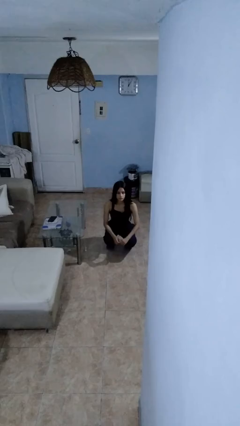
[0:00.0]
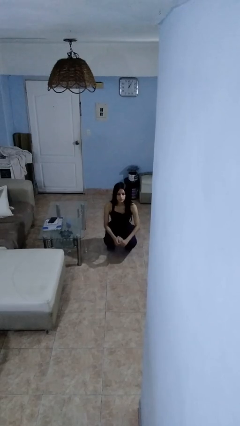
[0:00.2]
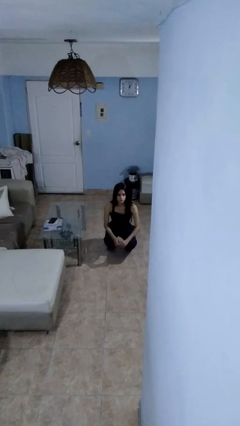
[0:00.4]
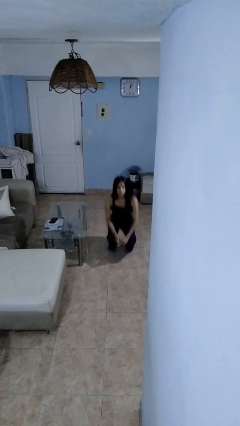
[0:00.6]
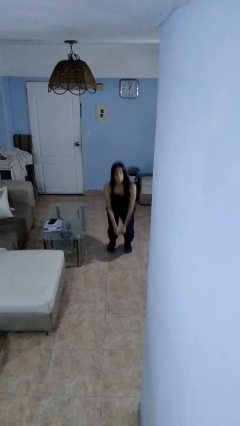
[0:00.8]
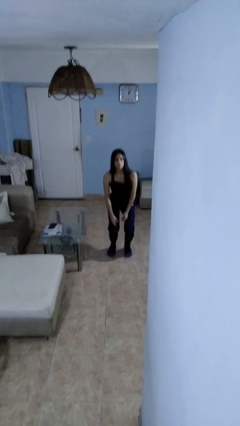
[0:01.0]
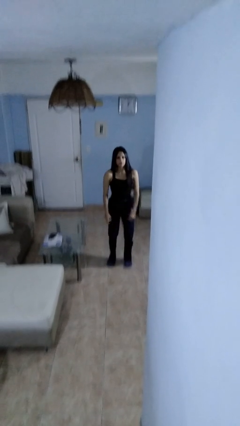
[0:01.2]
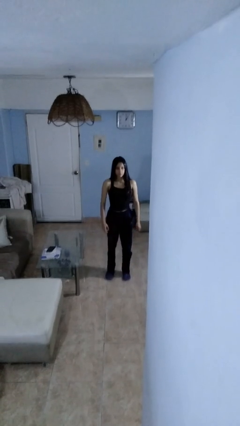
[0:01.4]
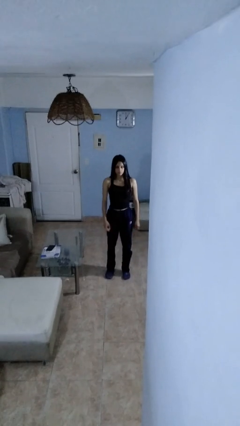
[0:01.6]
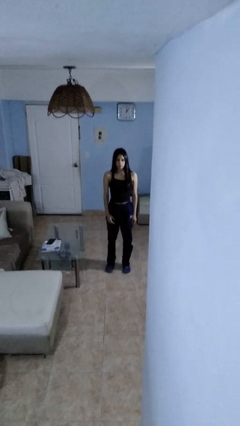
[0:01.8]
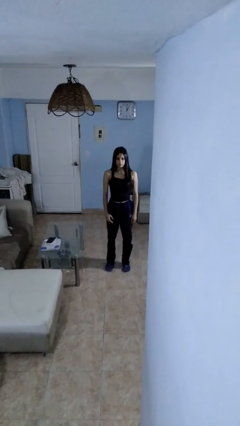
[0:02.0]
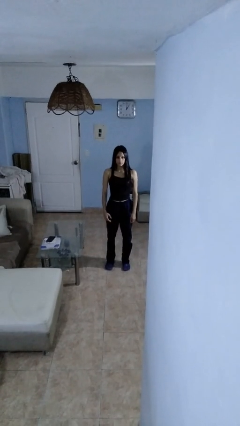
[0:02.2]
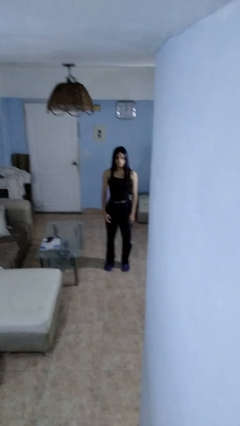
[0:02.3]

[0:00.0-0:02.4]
person stands up

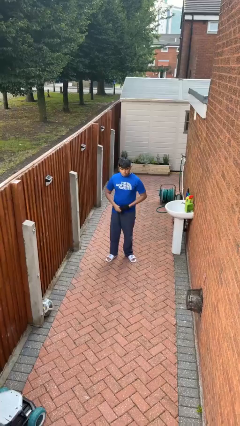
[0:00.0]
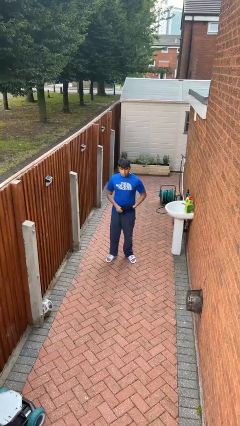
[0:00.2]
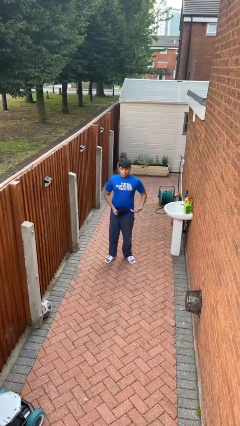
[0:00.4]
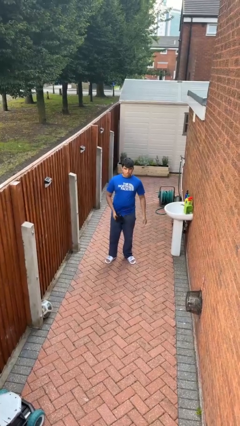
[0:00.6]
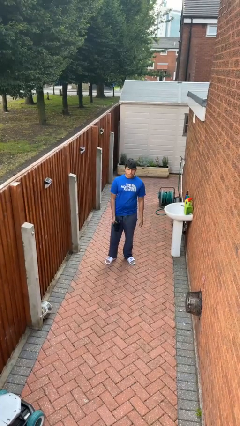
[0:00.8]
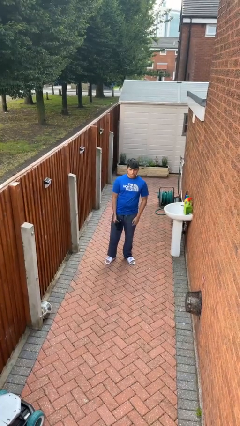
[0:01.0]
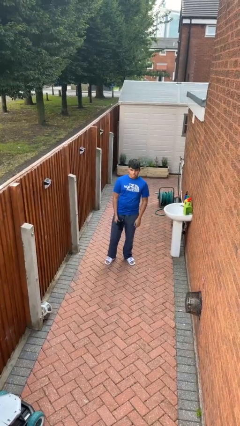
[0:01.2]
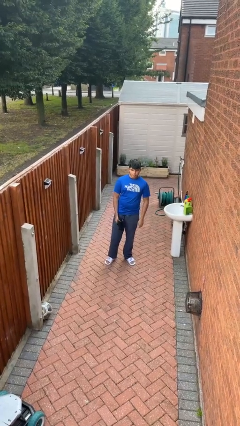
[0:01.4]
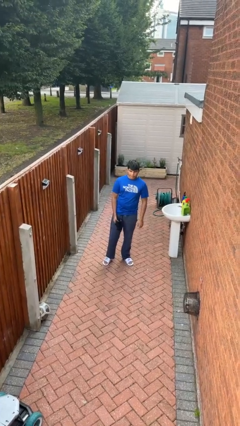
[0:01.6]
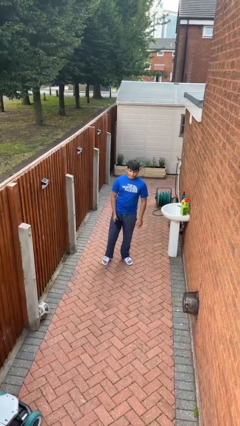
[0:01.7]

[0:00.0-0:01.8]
person takes off gloves

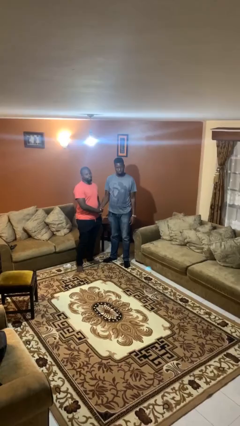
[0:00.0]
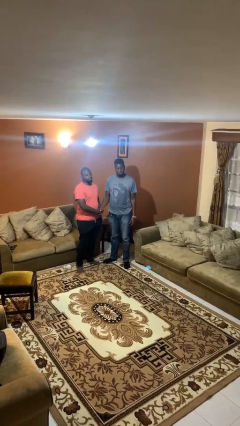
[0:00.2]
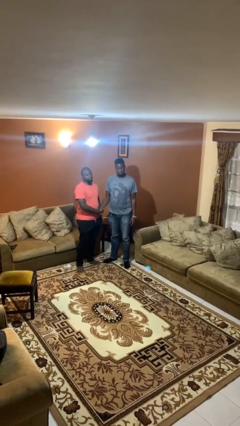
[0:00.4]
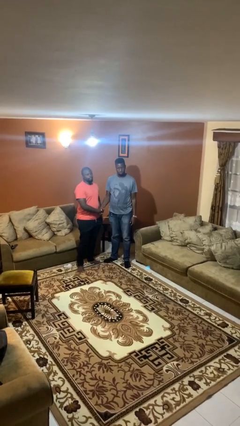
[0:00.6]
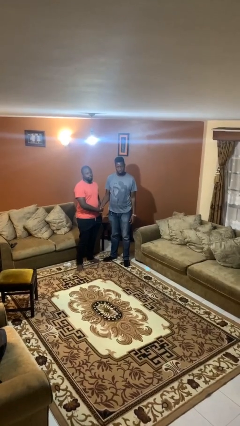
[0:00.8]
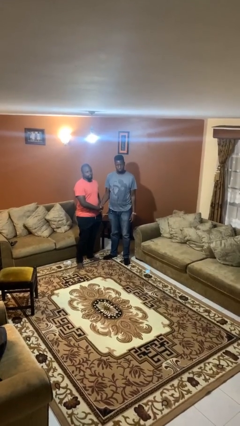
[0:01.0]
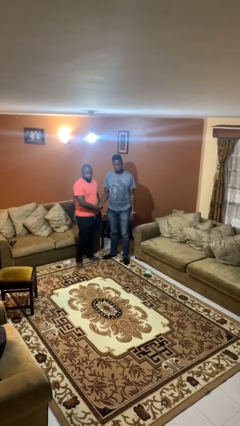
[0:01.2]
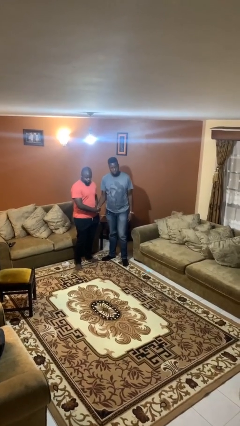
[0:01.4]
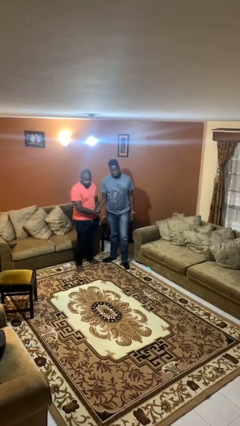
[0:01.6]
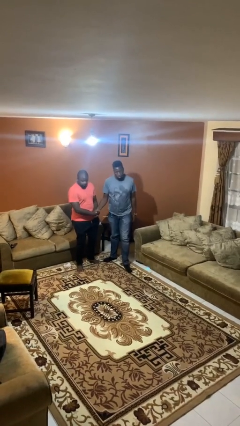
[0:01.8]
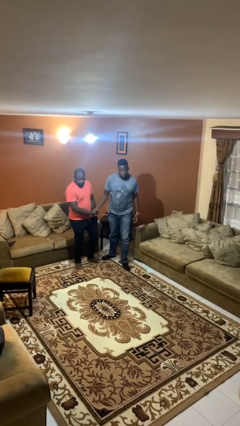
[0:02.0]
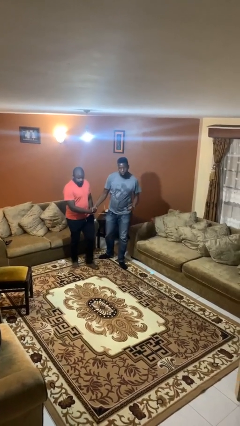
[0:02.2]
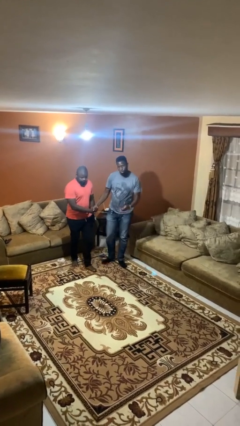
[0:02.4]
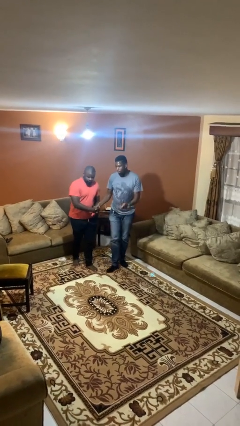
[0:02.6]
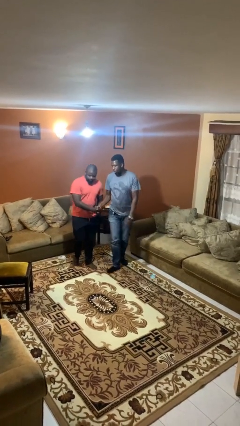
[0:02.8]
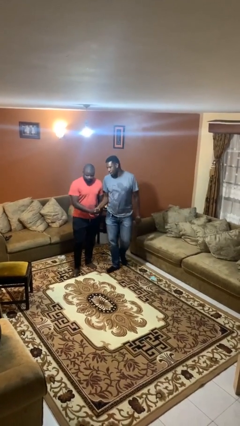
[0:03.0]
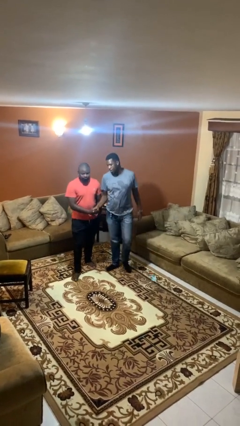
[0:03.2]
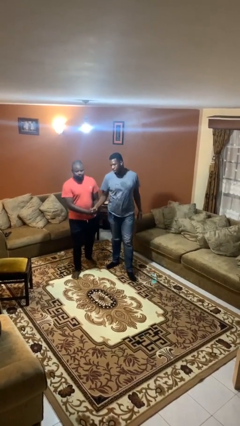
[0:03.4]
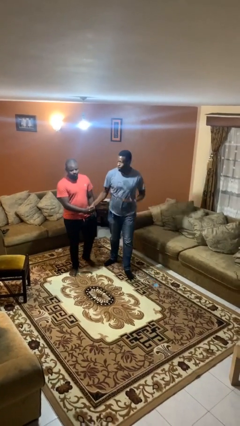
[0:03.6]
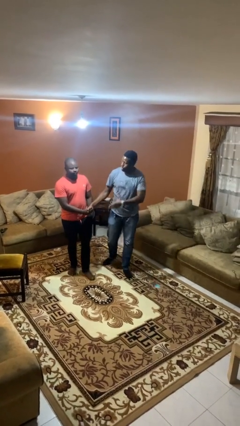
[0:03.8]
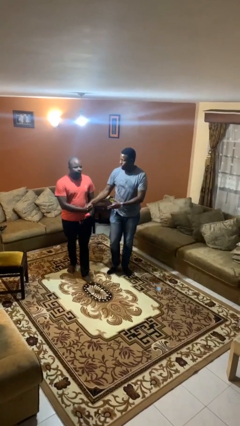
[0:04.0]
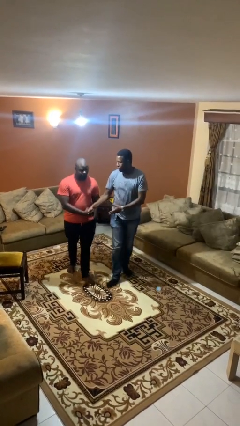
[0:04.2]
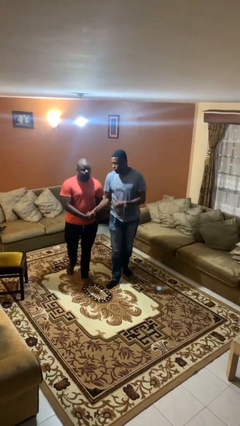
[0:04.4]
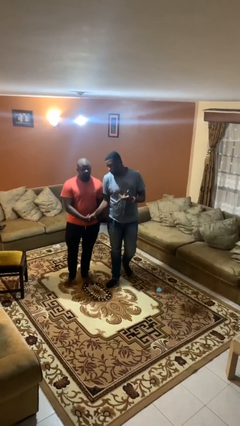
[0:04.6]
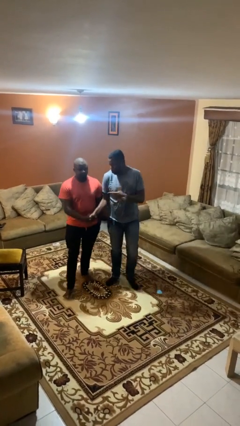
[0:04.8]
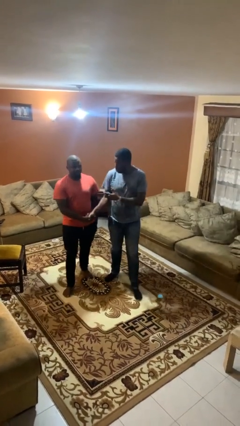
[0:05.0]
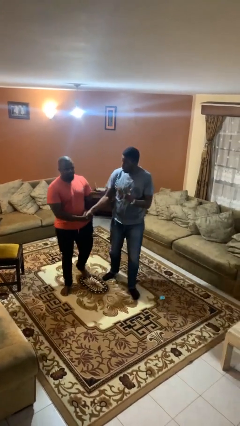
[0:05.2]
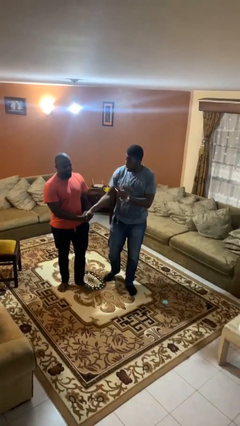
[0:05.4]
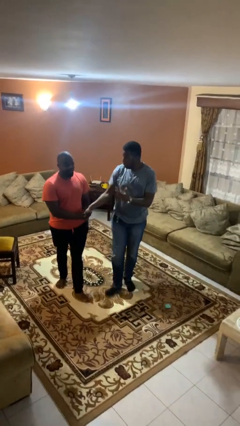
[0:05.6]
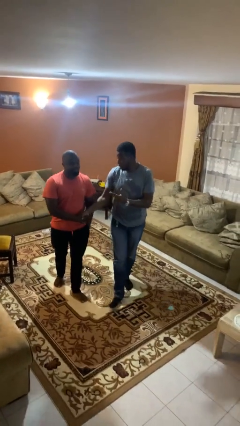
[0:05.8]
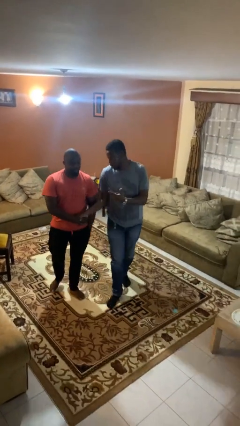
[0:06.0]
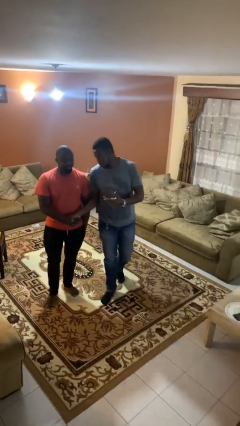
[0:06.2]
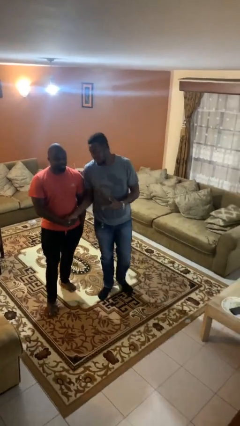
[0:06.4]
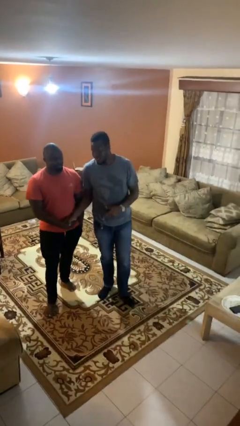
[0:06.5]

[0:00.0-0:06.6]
person holds hand

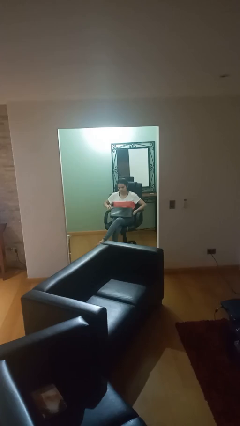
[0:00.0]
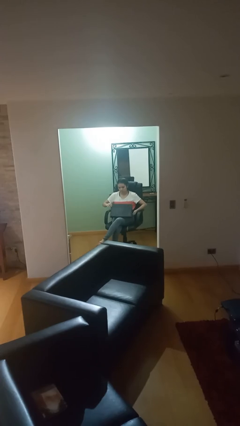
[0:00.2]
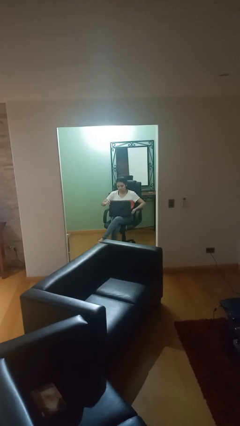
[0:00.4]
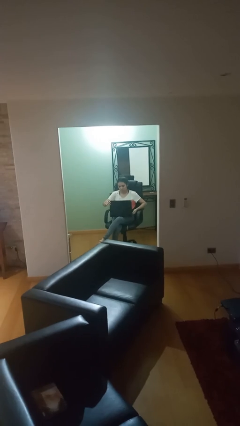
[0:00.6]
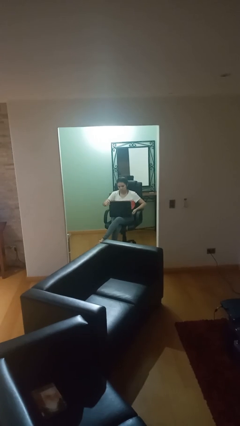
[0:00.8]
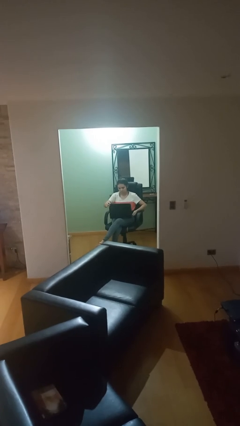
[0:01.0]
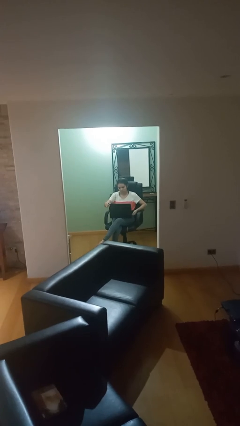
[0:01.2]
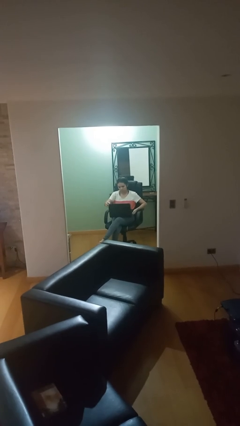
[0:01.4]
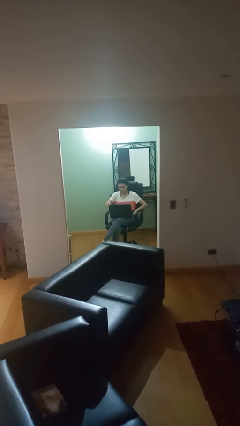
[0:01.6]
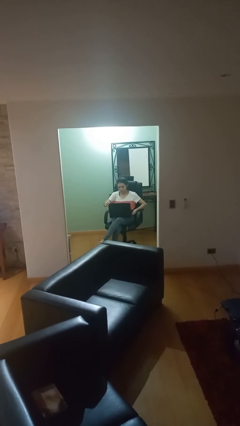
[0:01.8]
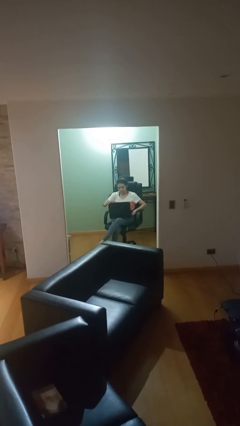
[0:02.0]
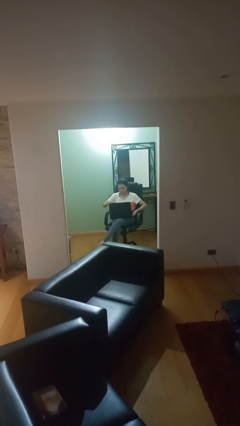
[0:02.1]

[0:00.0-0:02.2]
person interacts with laptop

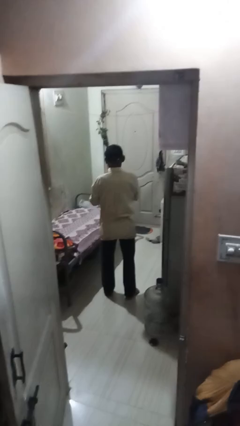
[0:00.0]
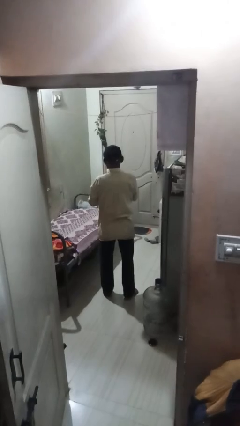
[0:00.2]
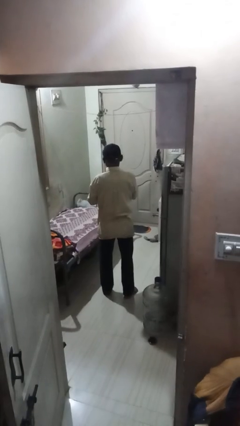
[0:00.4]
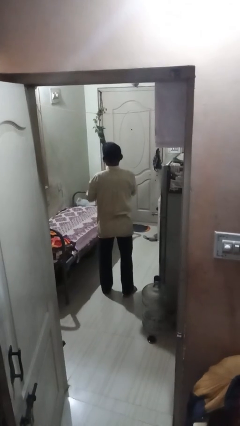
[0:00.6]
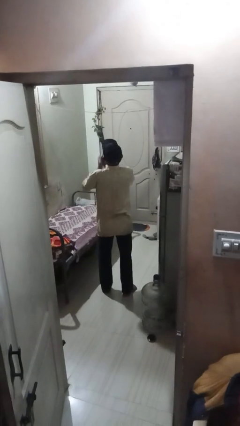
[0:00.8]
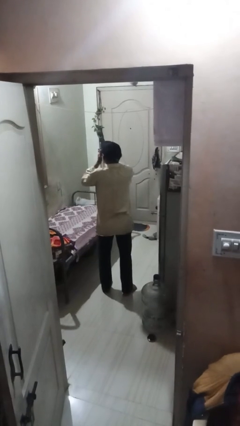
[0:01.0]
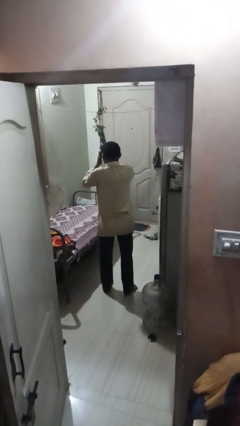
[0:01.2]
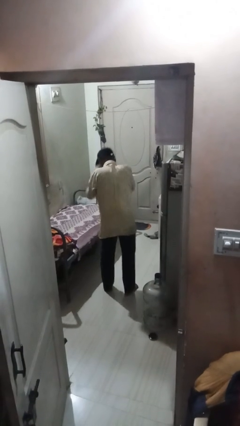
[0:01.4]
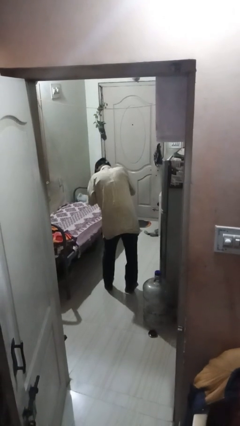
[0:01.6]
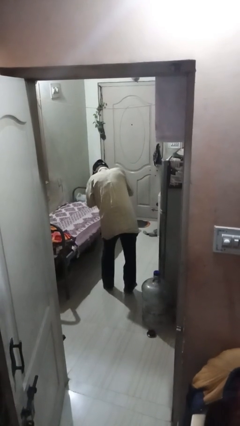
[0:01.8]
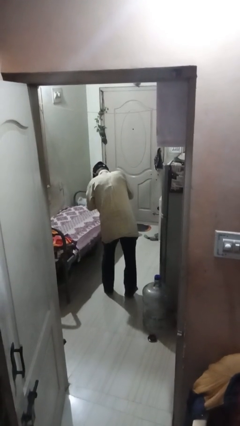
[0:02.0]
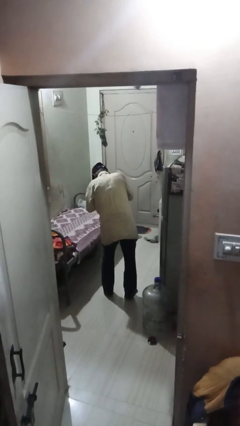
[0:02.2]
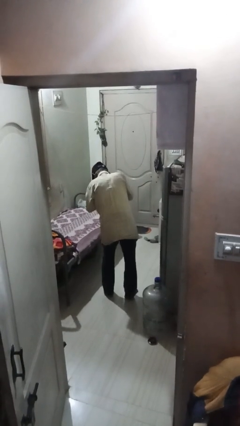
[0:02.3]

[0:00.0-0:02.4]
person sneezes into hand

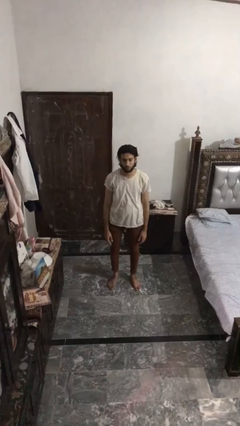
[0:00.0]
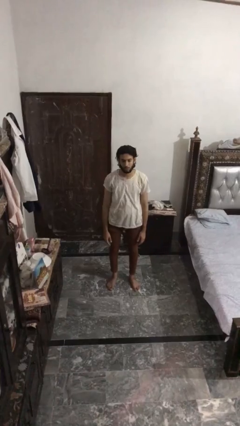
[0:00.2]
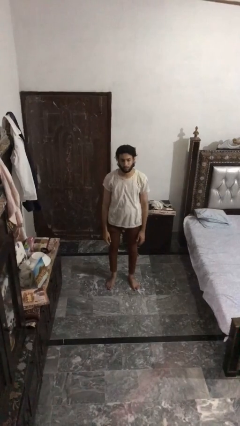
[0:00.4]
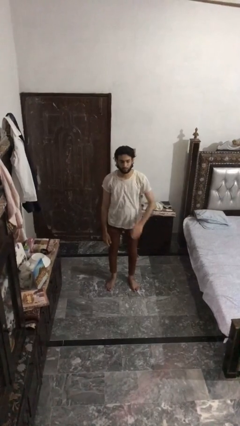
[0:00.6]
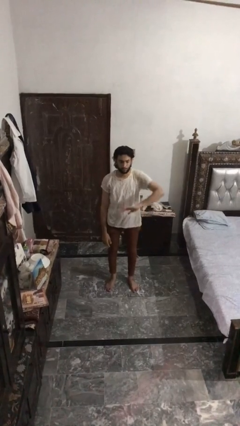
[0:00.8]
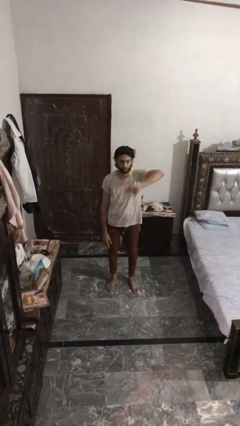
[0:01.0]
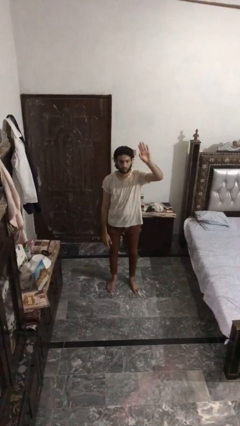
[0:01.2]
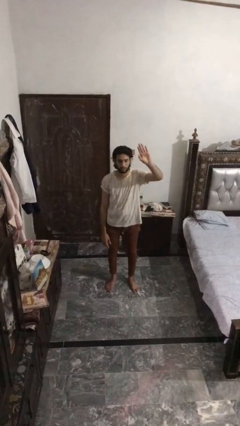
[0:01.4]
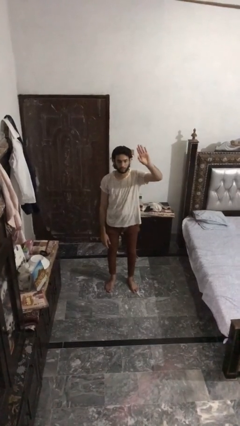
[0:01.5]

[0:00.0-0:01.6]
person gestures swipe up
